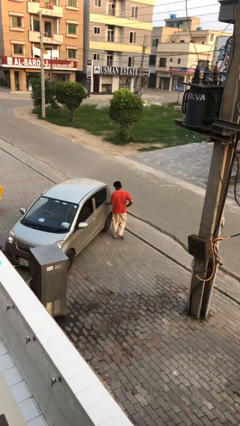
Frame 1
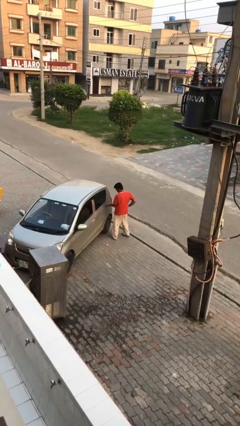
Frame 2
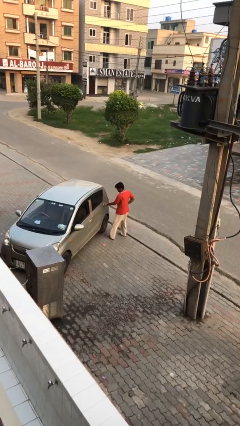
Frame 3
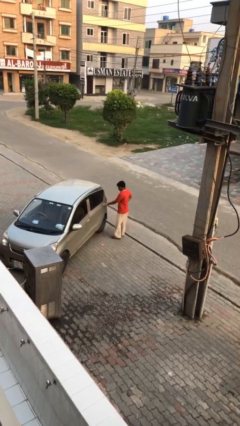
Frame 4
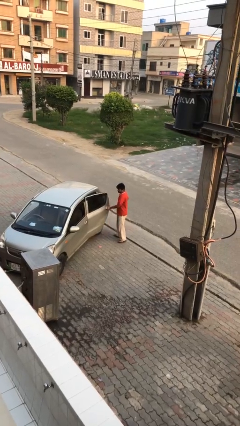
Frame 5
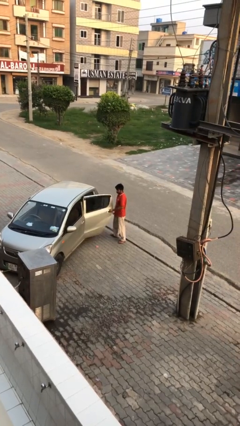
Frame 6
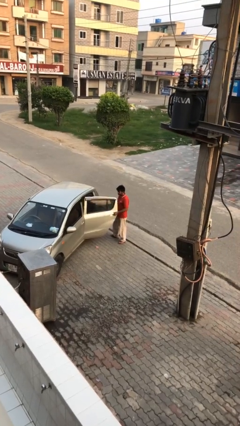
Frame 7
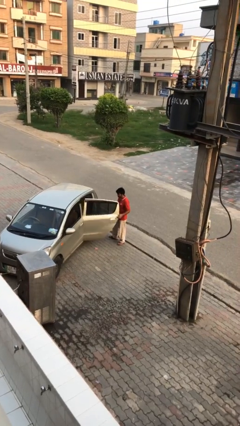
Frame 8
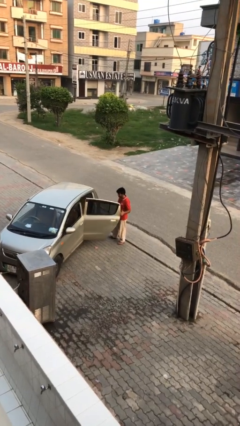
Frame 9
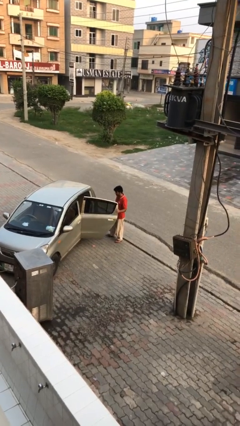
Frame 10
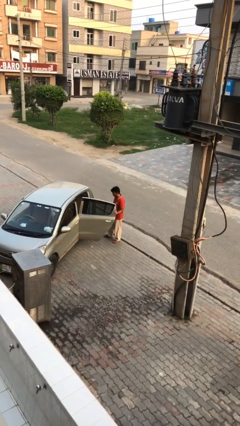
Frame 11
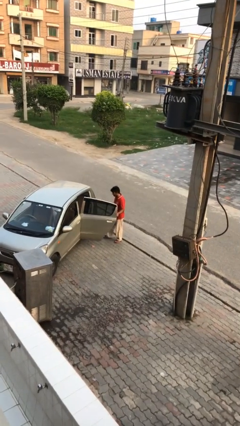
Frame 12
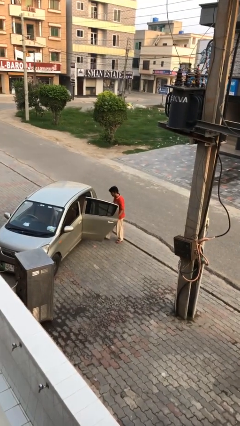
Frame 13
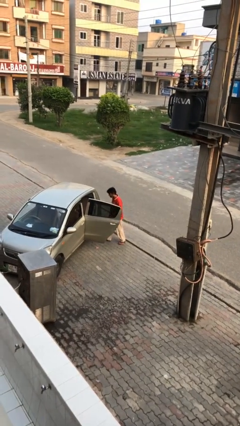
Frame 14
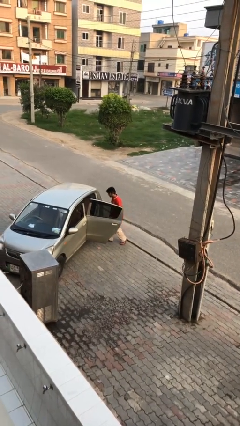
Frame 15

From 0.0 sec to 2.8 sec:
person opens car door

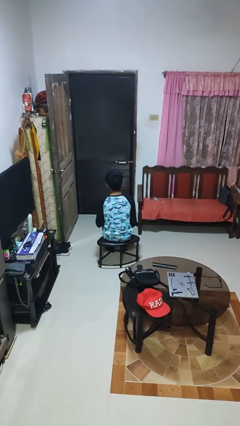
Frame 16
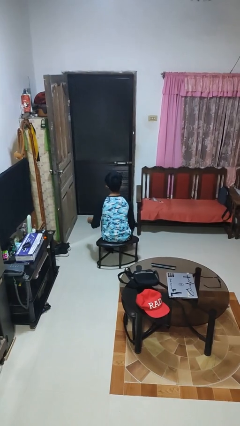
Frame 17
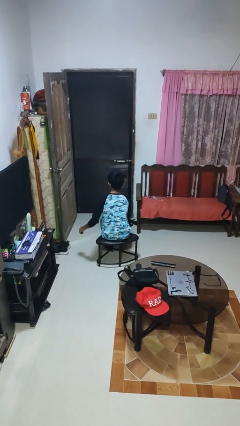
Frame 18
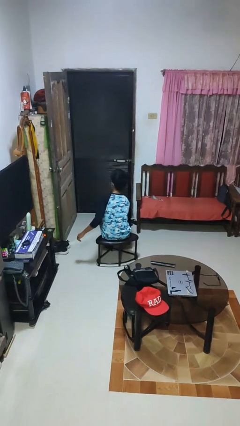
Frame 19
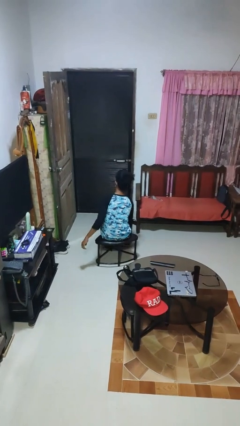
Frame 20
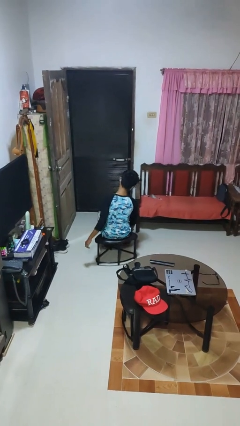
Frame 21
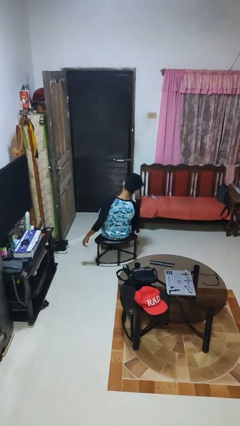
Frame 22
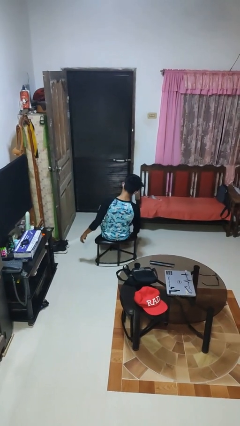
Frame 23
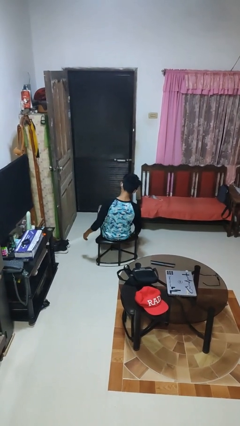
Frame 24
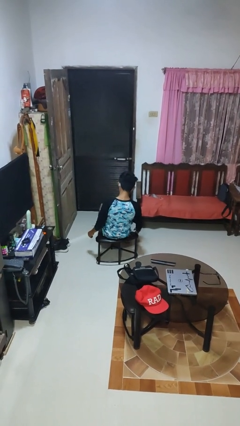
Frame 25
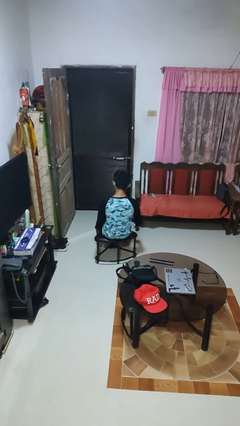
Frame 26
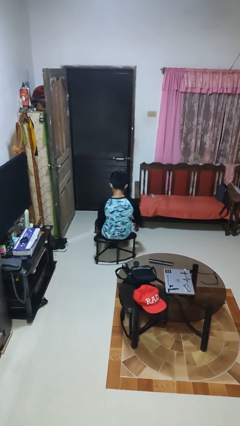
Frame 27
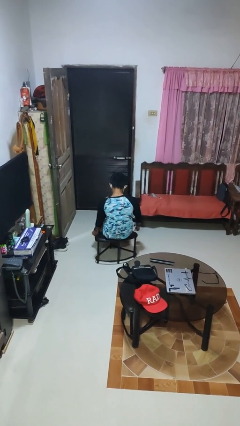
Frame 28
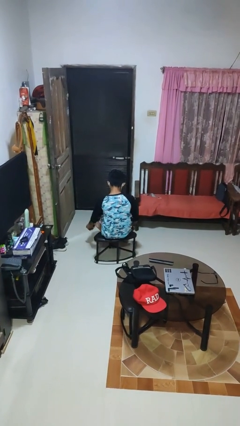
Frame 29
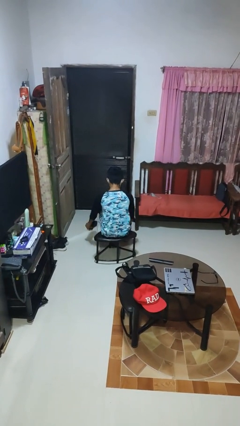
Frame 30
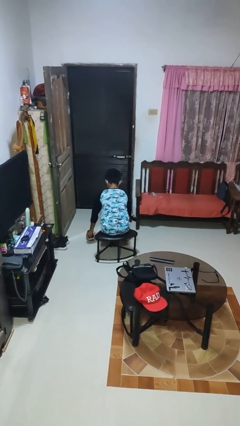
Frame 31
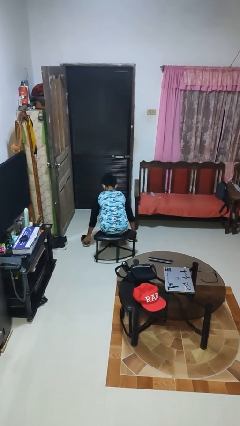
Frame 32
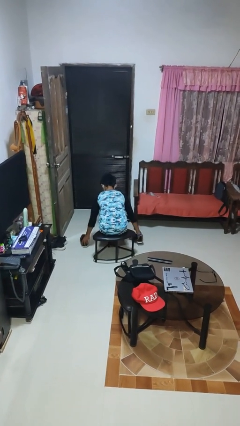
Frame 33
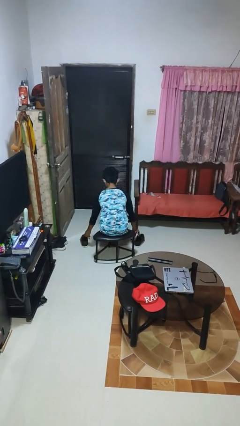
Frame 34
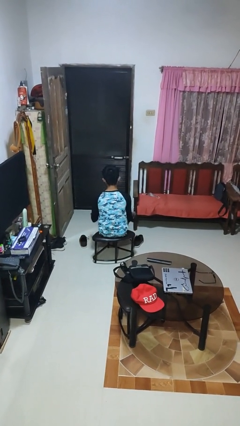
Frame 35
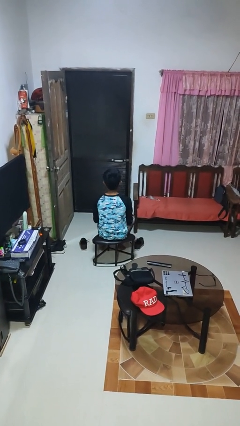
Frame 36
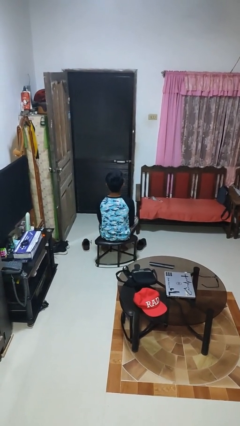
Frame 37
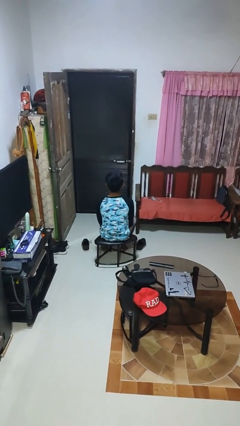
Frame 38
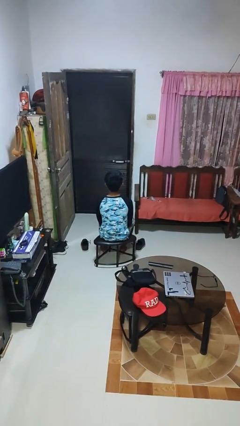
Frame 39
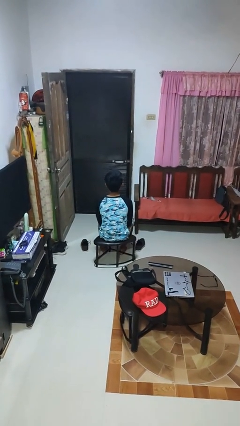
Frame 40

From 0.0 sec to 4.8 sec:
person takes off shoes

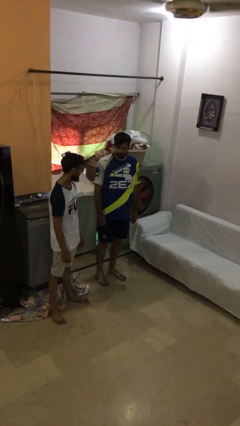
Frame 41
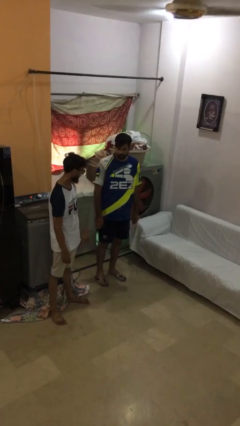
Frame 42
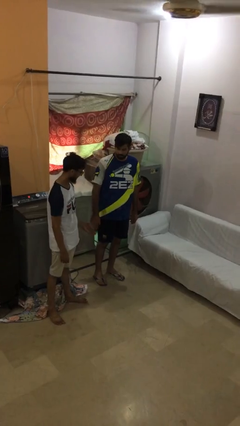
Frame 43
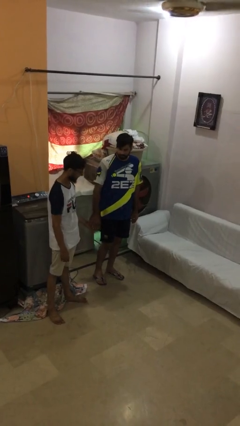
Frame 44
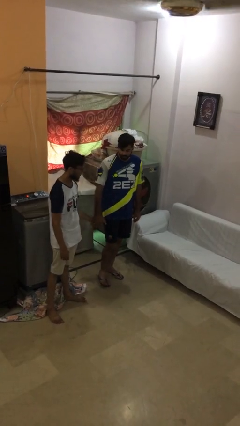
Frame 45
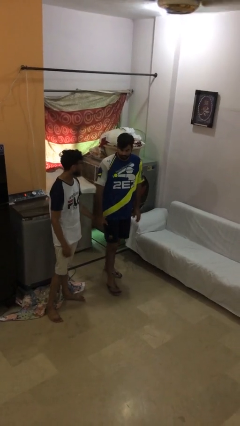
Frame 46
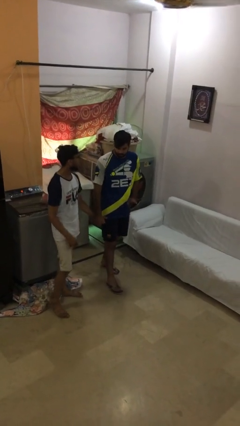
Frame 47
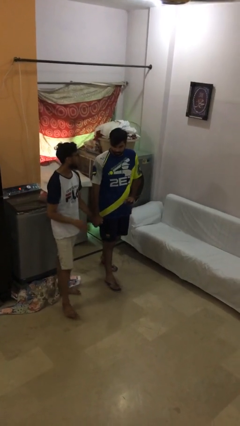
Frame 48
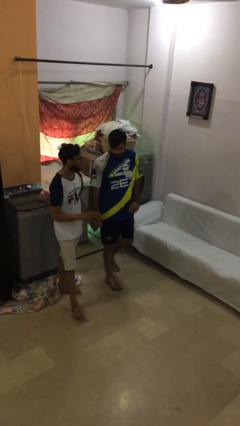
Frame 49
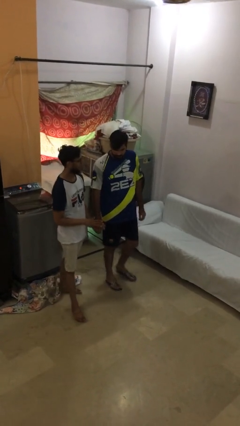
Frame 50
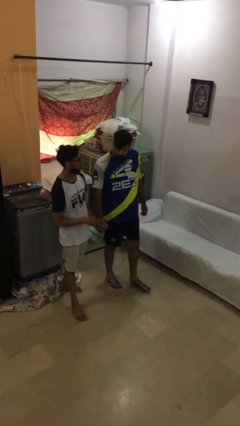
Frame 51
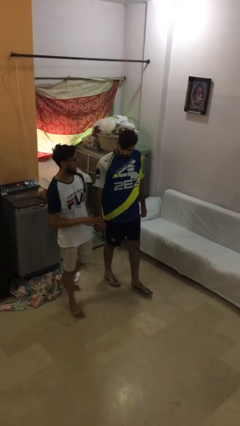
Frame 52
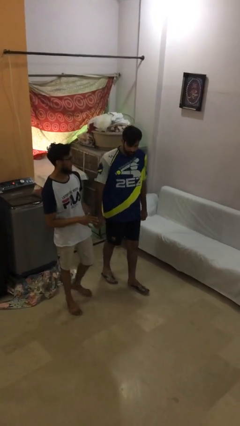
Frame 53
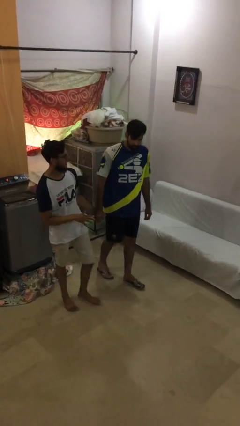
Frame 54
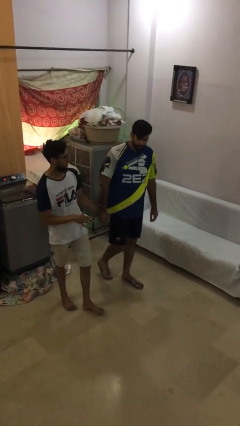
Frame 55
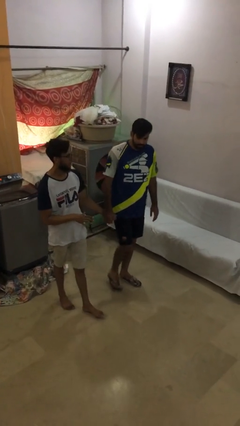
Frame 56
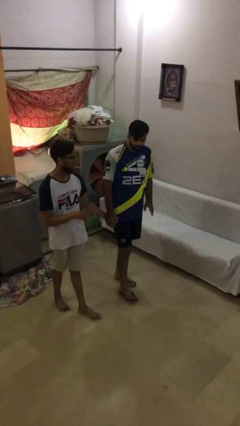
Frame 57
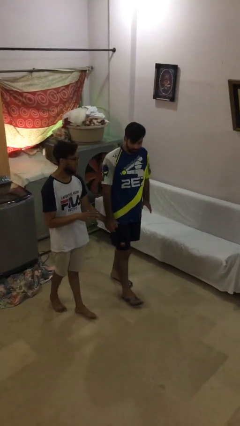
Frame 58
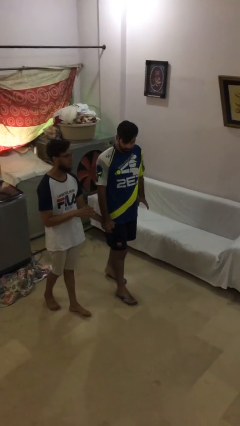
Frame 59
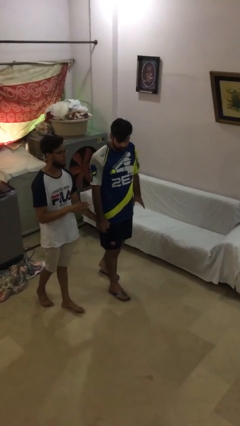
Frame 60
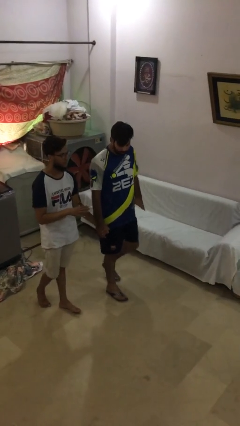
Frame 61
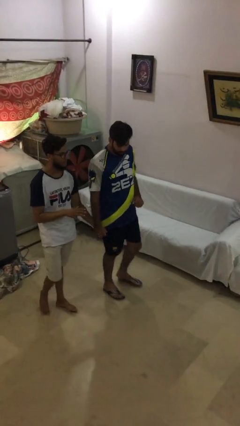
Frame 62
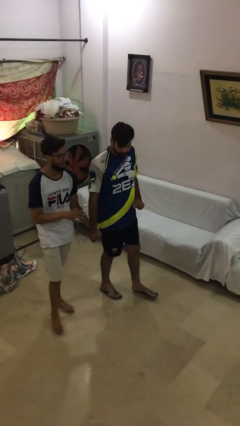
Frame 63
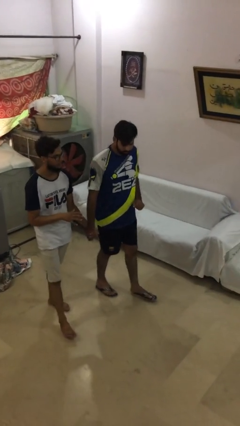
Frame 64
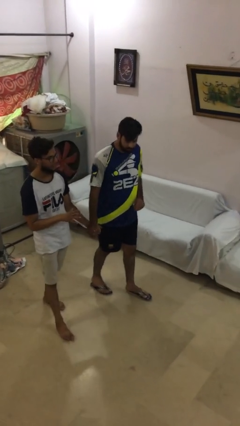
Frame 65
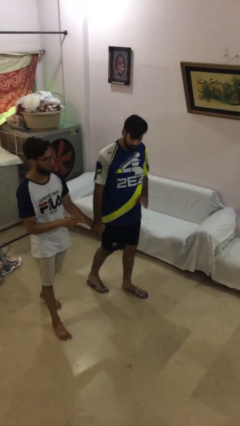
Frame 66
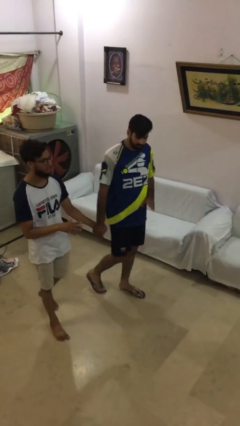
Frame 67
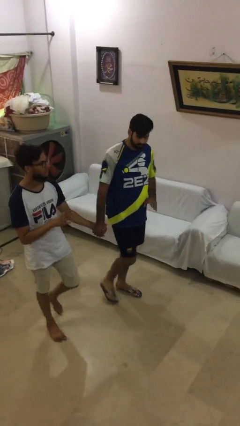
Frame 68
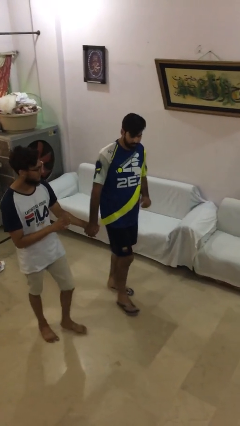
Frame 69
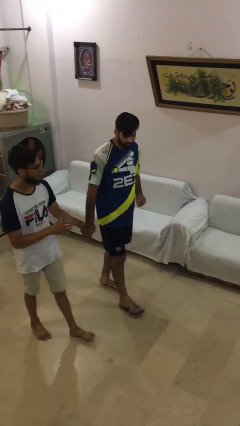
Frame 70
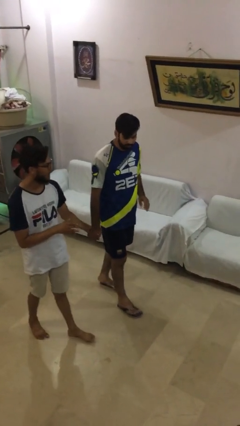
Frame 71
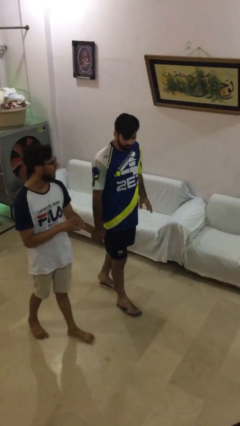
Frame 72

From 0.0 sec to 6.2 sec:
person holds hand

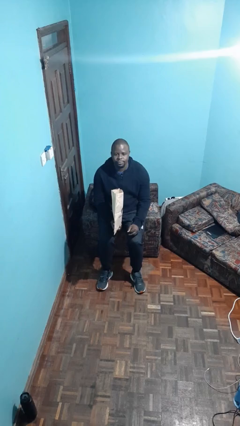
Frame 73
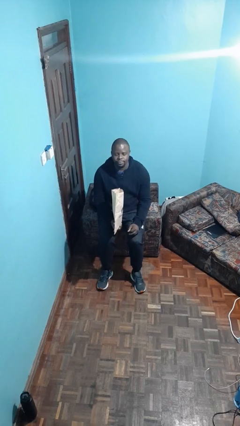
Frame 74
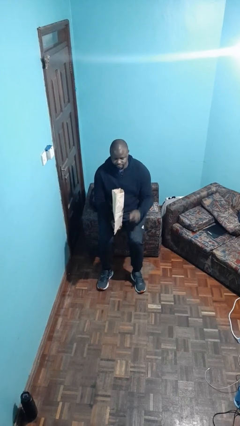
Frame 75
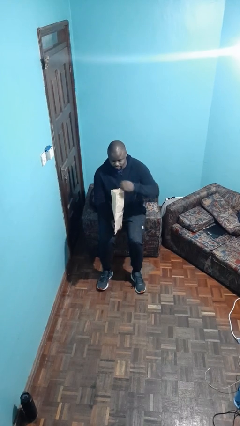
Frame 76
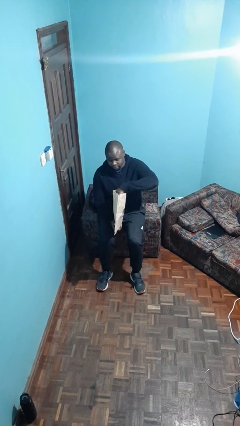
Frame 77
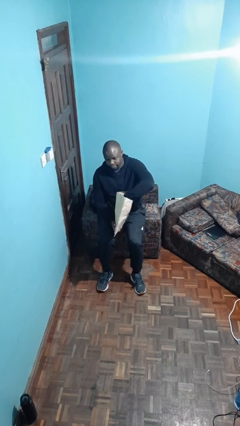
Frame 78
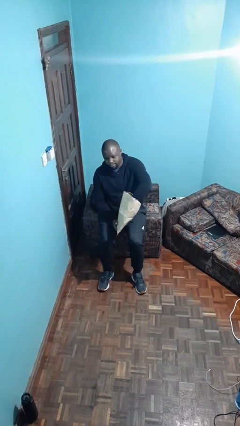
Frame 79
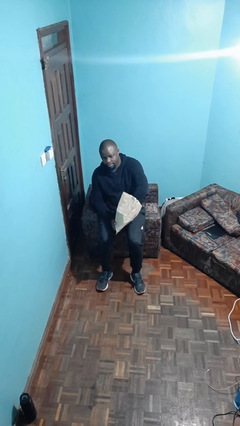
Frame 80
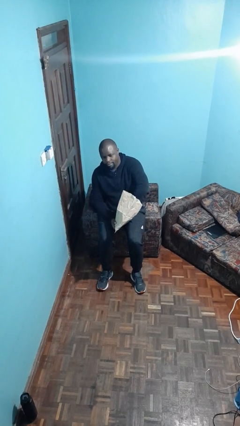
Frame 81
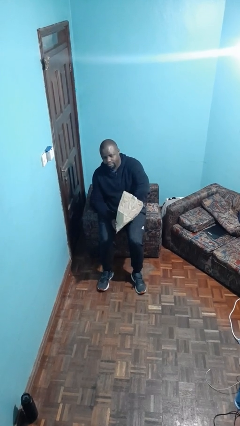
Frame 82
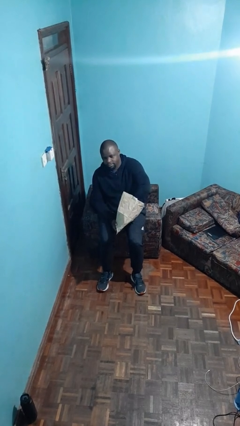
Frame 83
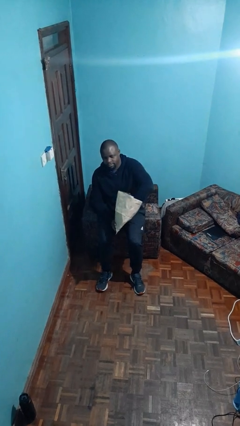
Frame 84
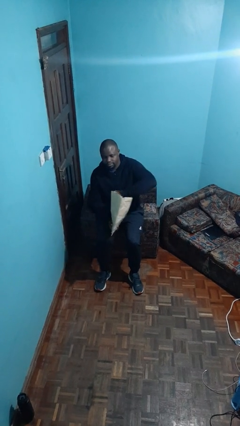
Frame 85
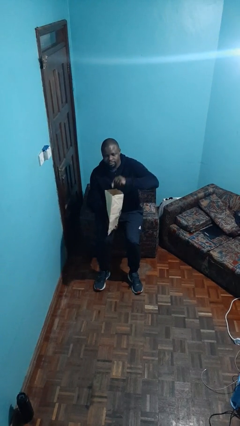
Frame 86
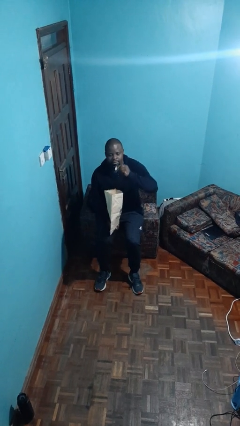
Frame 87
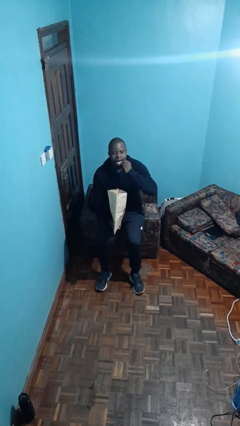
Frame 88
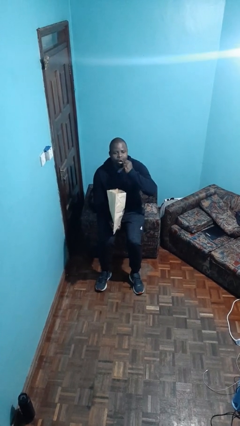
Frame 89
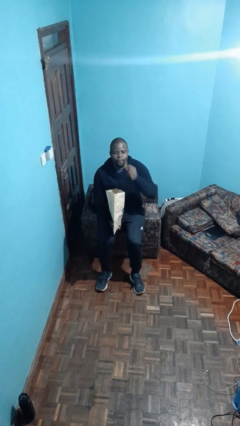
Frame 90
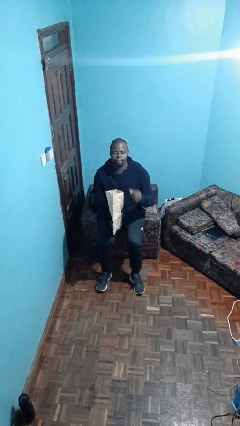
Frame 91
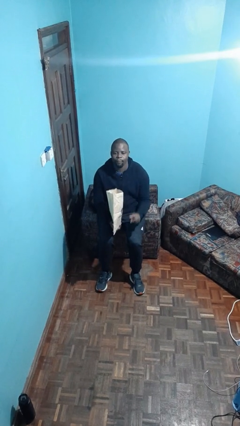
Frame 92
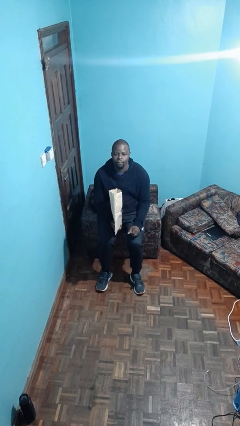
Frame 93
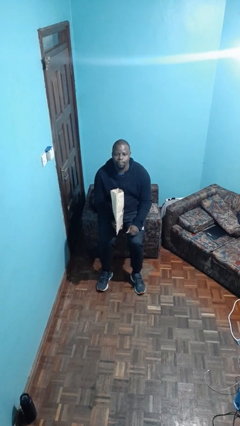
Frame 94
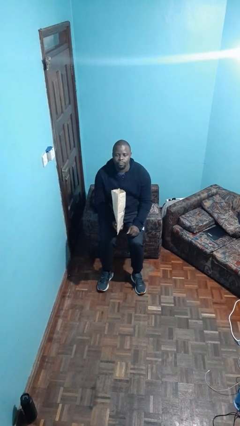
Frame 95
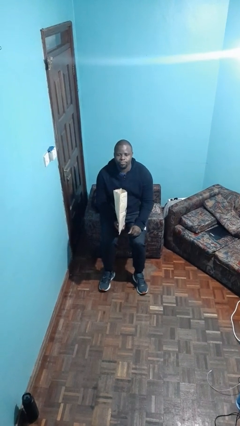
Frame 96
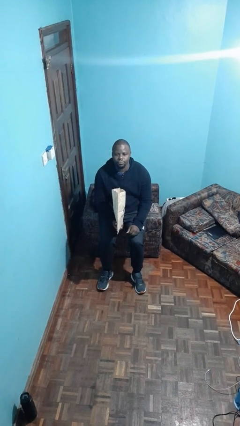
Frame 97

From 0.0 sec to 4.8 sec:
person eats snack from bag
